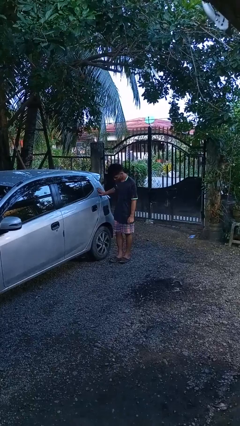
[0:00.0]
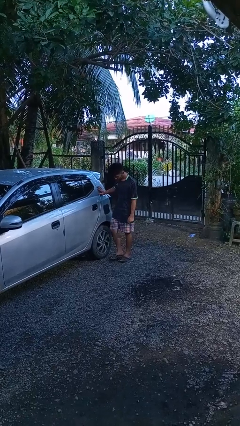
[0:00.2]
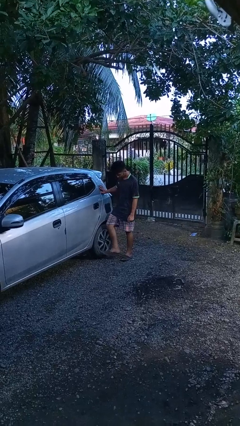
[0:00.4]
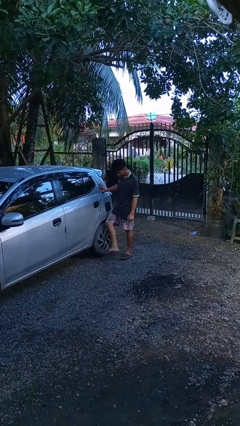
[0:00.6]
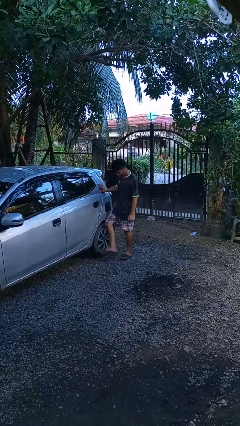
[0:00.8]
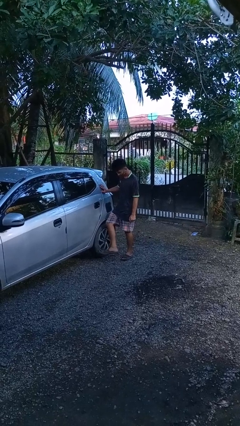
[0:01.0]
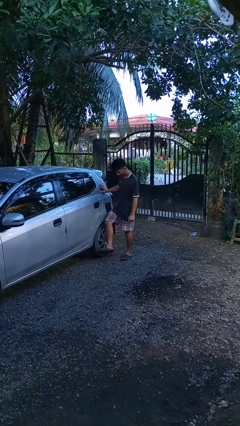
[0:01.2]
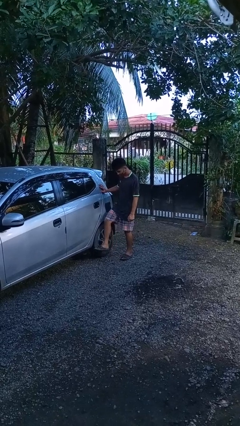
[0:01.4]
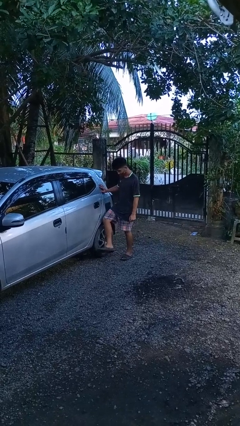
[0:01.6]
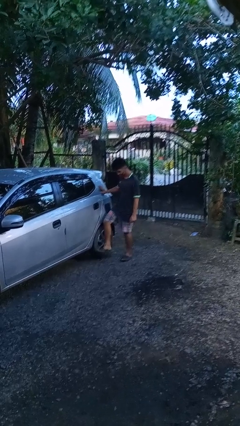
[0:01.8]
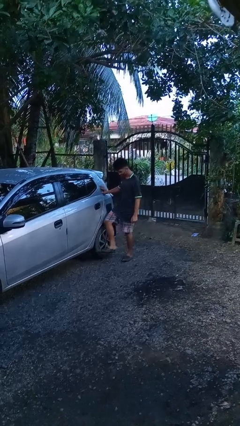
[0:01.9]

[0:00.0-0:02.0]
person kicks car tires

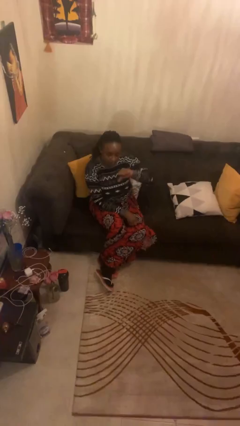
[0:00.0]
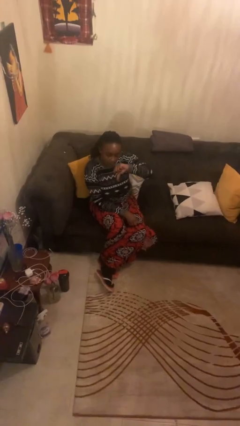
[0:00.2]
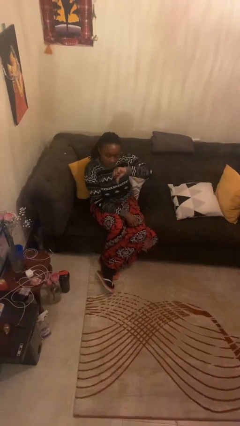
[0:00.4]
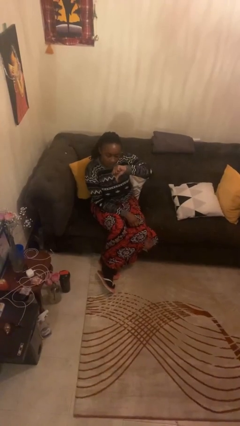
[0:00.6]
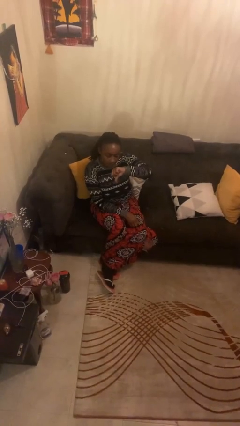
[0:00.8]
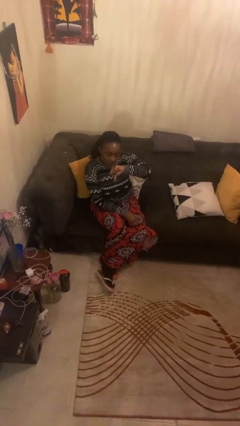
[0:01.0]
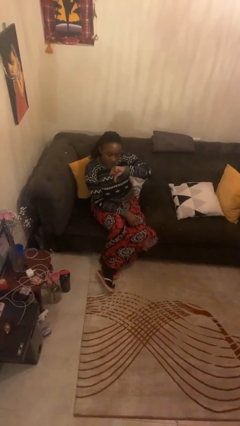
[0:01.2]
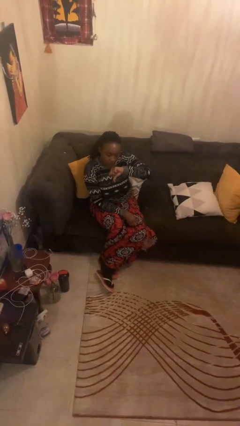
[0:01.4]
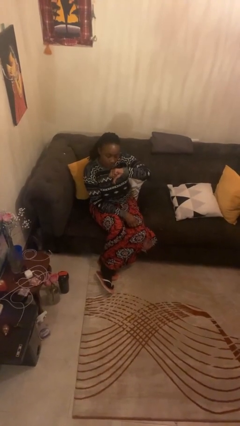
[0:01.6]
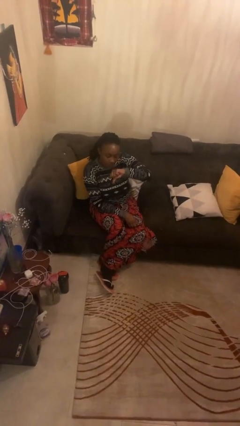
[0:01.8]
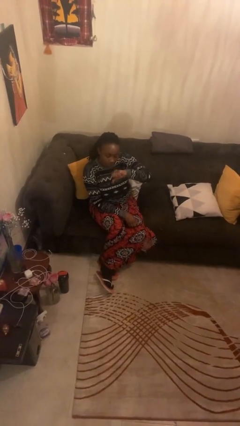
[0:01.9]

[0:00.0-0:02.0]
person gestures thumbs down

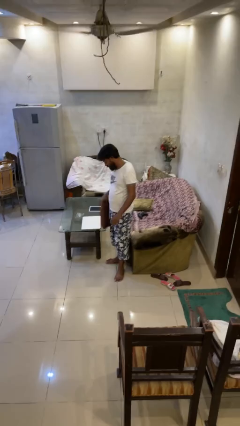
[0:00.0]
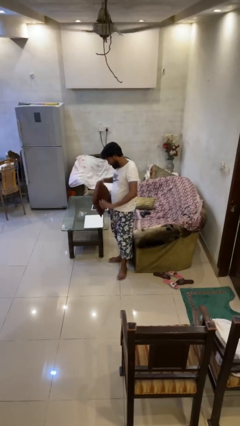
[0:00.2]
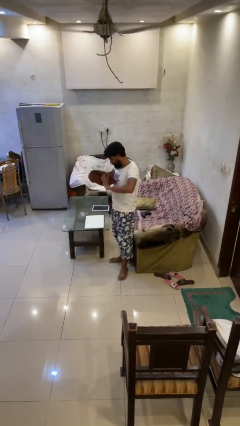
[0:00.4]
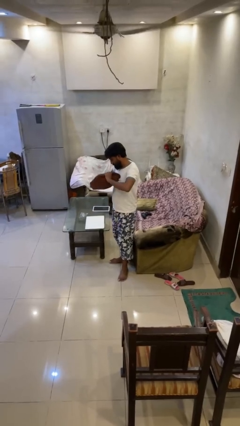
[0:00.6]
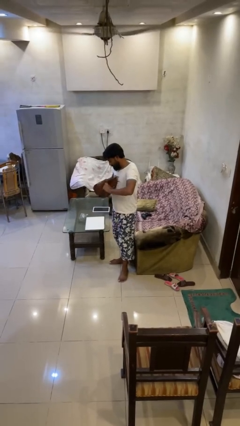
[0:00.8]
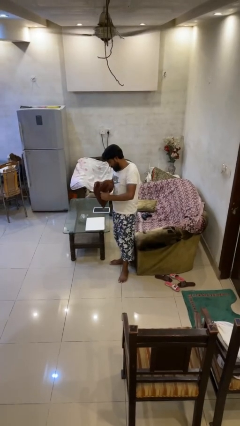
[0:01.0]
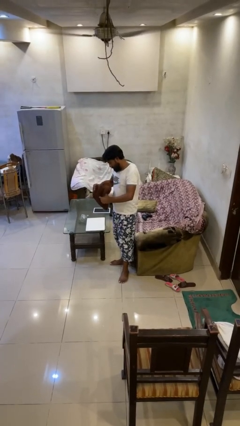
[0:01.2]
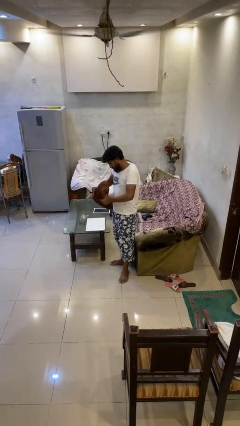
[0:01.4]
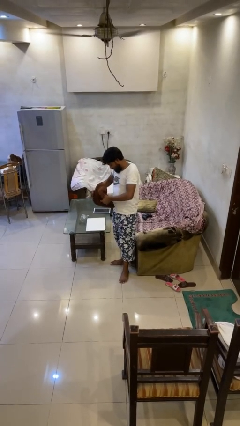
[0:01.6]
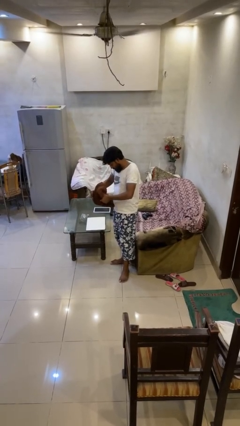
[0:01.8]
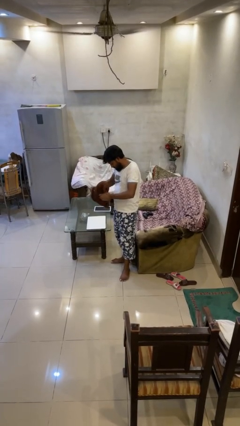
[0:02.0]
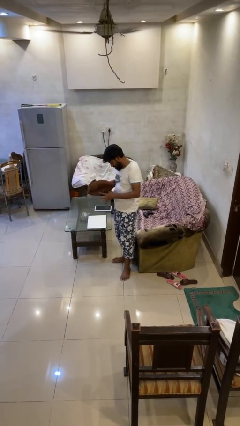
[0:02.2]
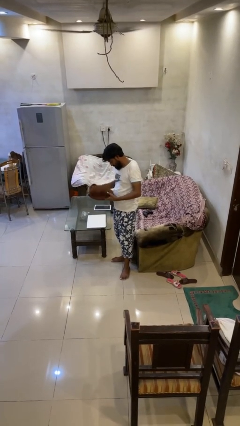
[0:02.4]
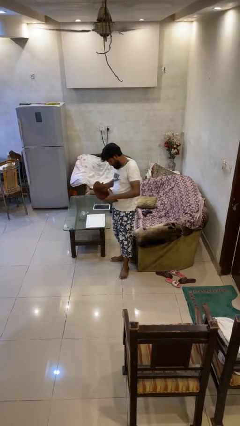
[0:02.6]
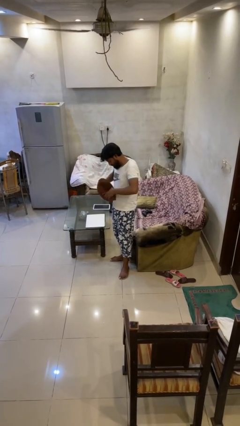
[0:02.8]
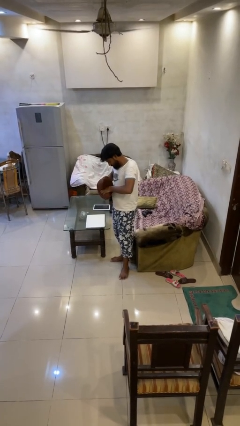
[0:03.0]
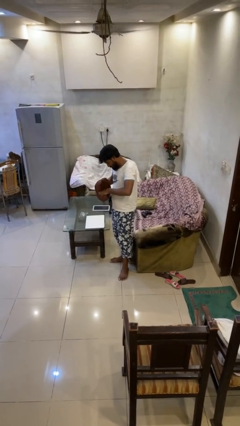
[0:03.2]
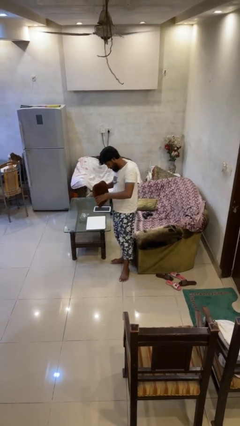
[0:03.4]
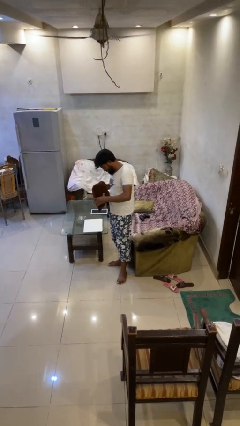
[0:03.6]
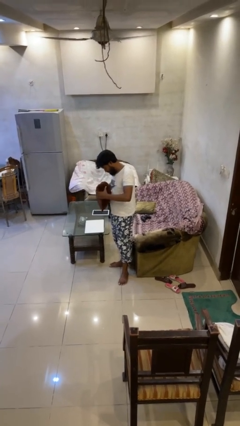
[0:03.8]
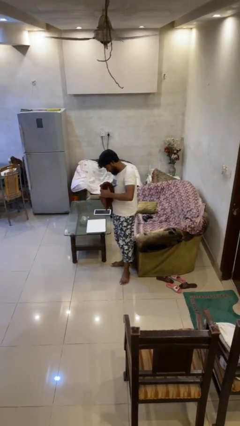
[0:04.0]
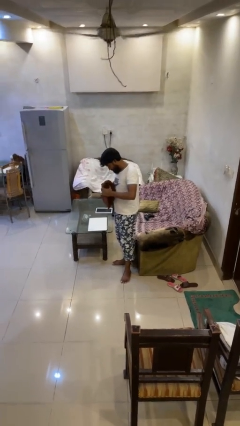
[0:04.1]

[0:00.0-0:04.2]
person squeezes object

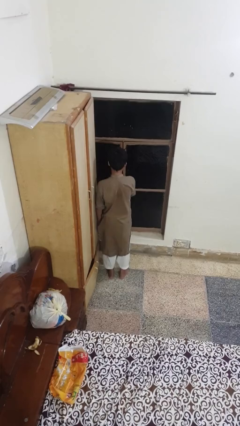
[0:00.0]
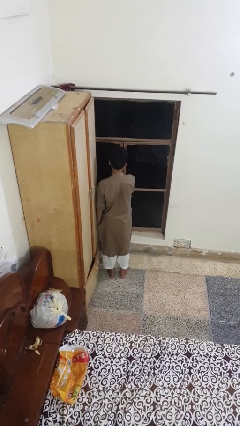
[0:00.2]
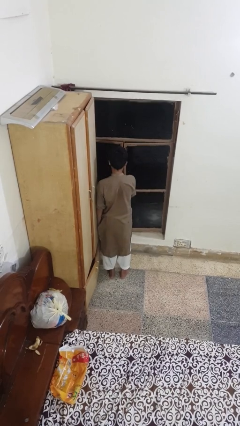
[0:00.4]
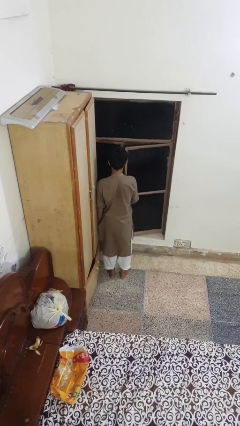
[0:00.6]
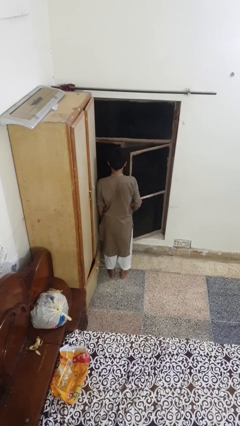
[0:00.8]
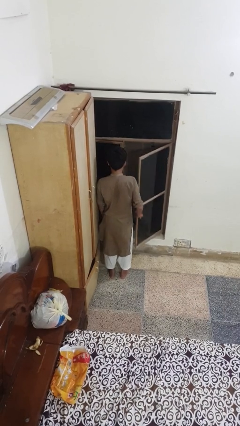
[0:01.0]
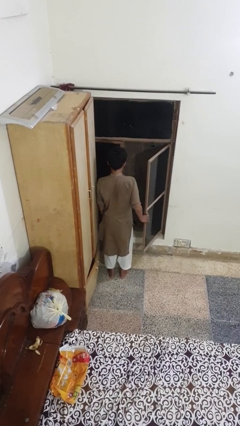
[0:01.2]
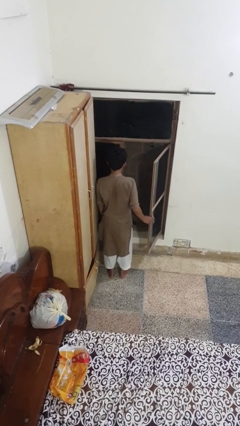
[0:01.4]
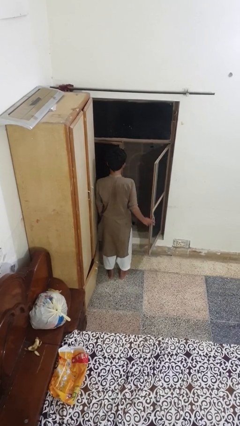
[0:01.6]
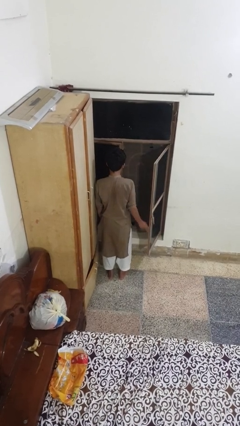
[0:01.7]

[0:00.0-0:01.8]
person opens home window

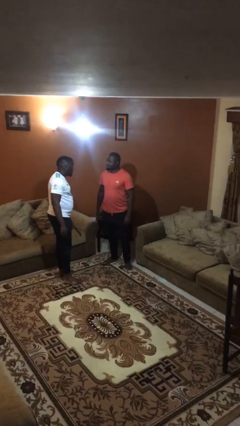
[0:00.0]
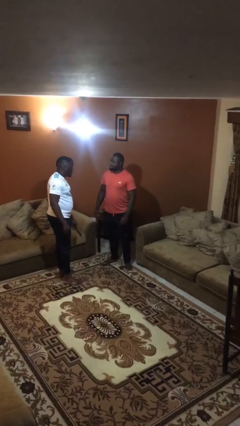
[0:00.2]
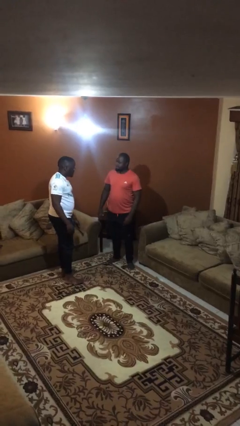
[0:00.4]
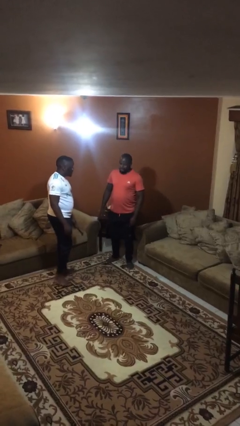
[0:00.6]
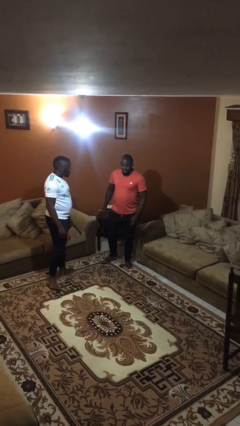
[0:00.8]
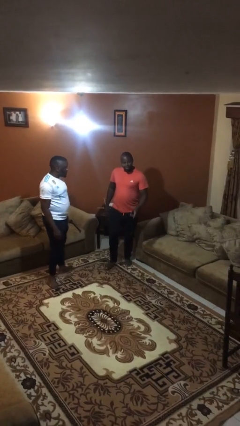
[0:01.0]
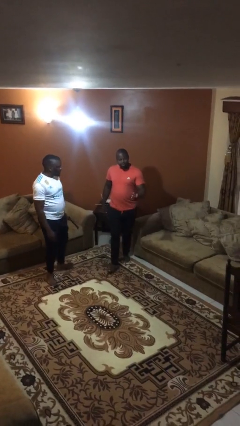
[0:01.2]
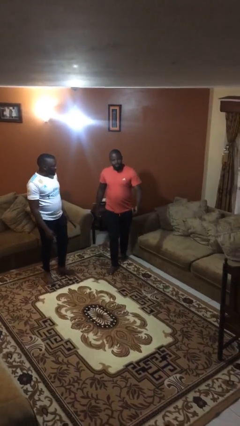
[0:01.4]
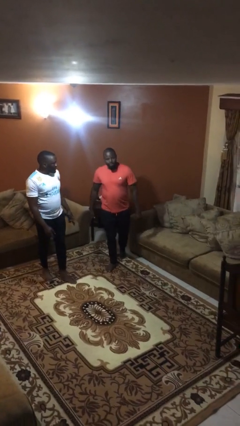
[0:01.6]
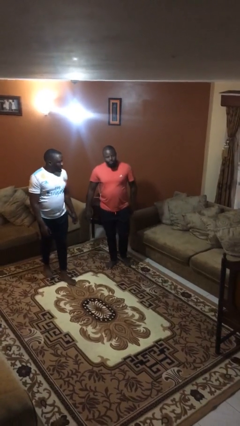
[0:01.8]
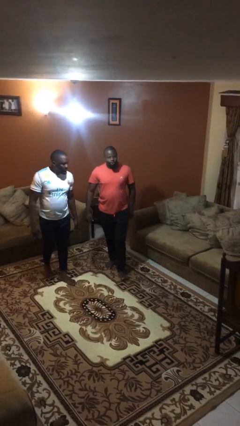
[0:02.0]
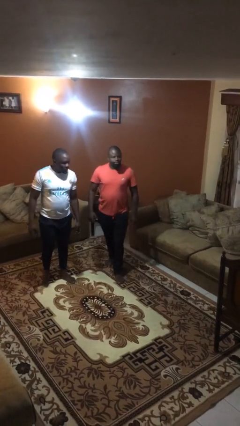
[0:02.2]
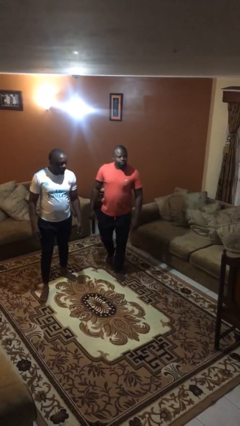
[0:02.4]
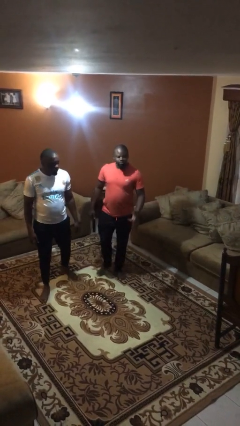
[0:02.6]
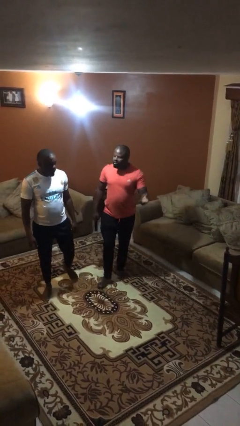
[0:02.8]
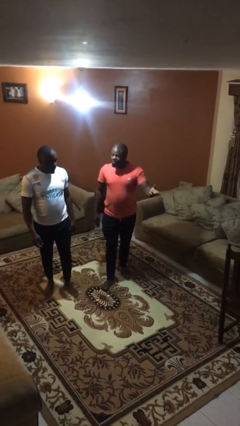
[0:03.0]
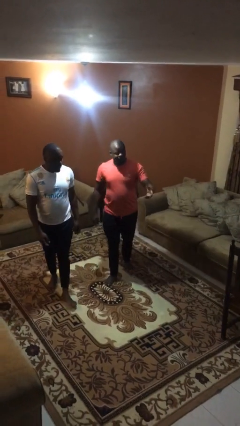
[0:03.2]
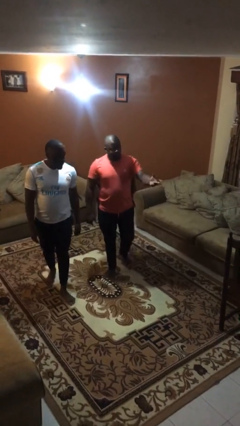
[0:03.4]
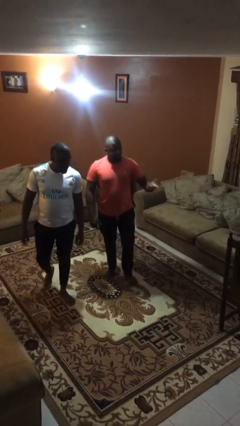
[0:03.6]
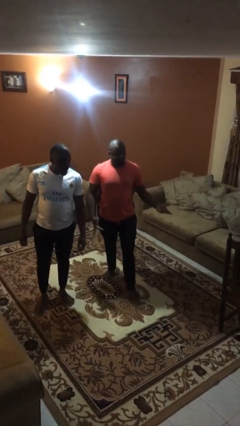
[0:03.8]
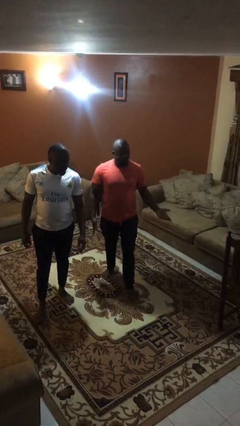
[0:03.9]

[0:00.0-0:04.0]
person talks to person

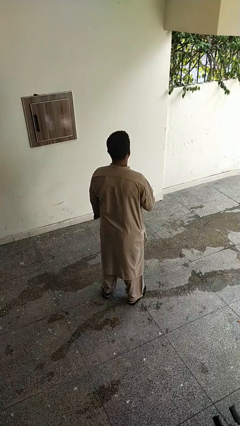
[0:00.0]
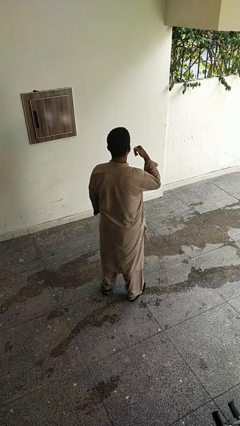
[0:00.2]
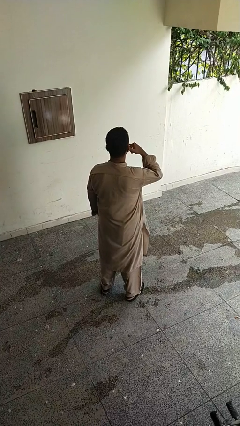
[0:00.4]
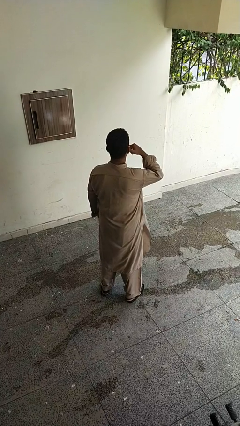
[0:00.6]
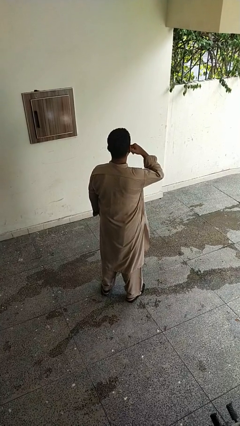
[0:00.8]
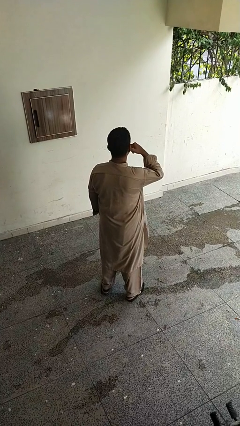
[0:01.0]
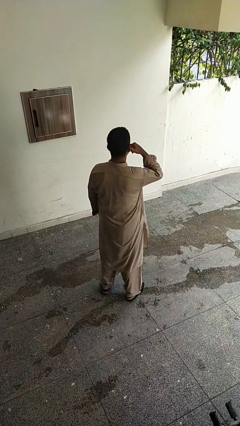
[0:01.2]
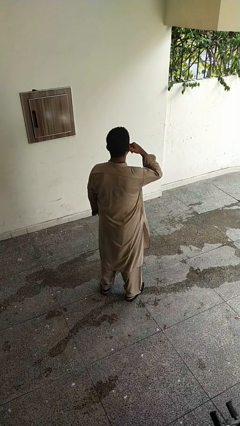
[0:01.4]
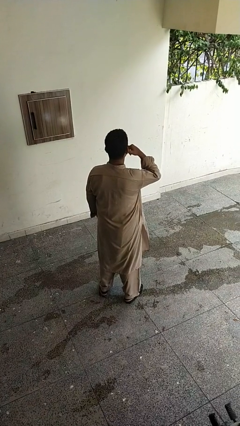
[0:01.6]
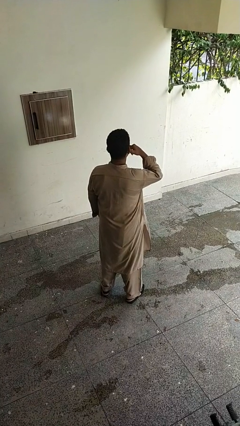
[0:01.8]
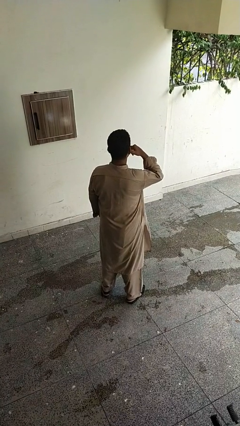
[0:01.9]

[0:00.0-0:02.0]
person gestures call me

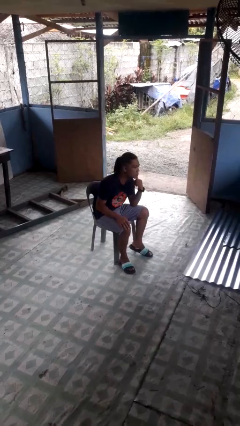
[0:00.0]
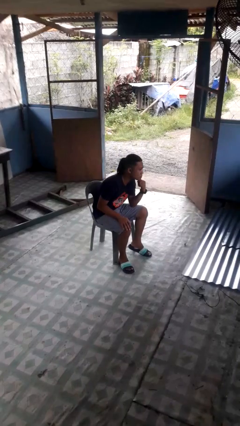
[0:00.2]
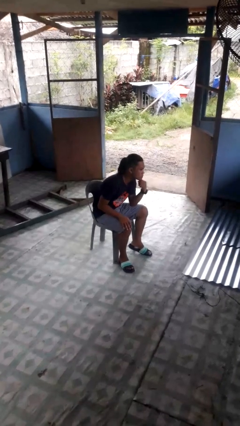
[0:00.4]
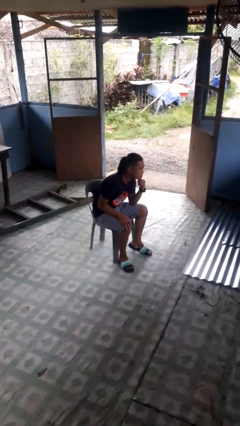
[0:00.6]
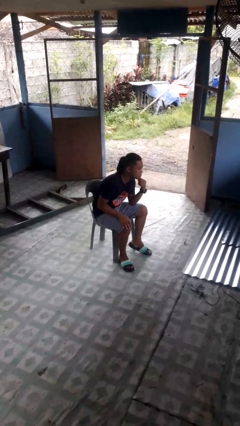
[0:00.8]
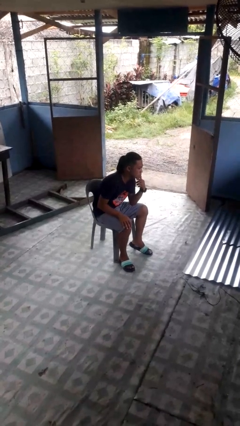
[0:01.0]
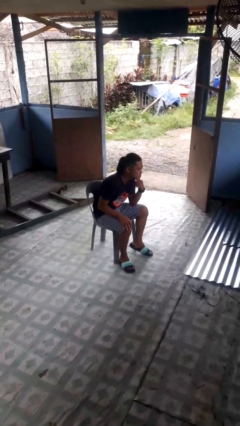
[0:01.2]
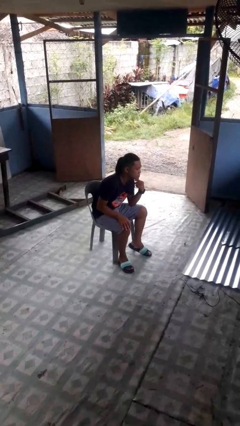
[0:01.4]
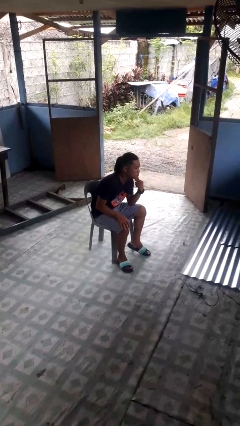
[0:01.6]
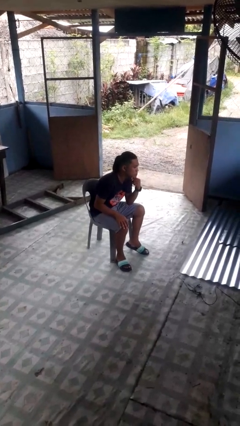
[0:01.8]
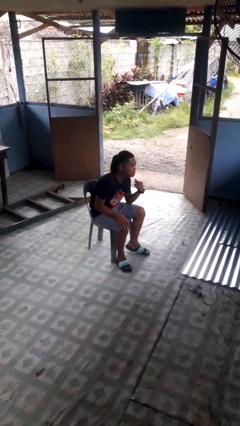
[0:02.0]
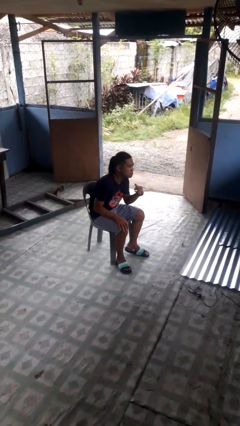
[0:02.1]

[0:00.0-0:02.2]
person strokes chin
